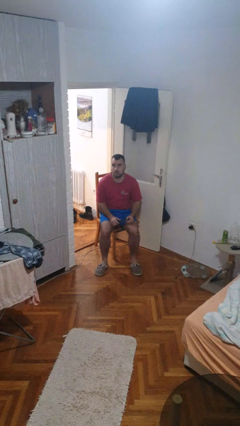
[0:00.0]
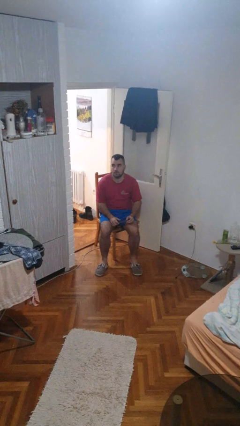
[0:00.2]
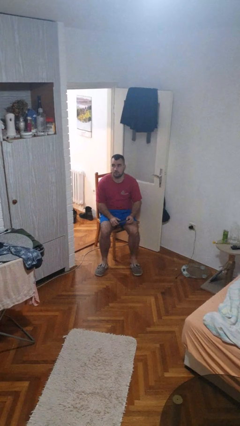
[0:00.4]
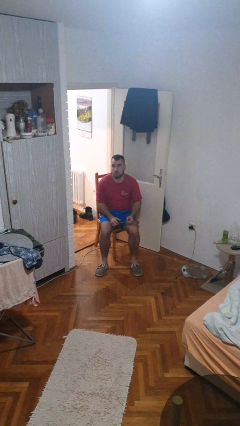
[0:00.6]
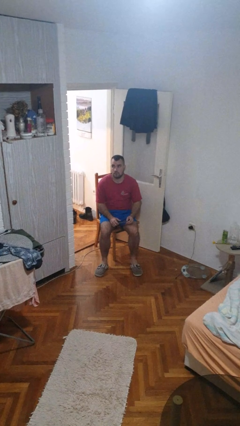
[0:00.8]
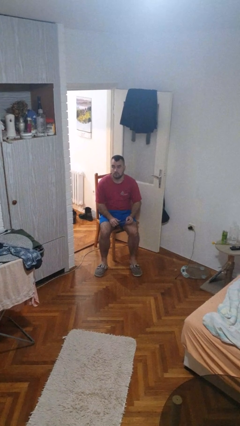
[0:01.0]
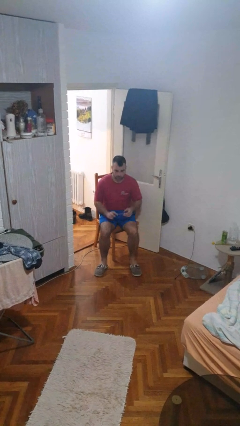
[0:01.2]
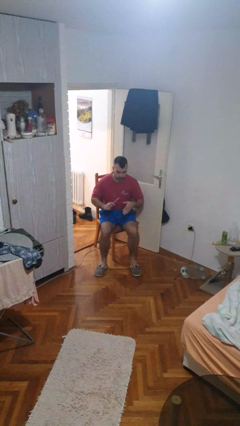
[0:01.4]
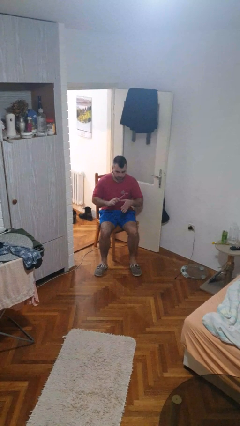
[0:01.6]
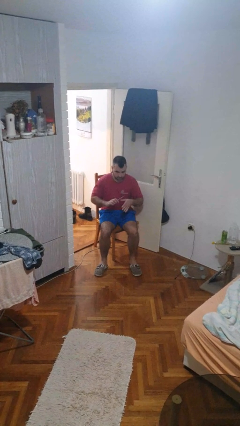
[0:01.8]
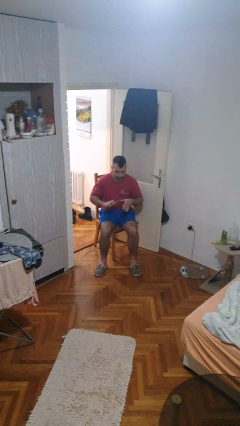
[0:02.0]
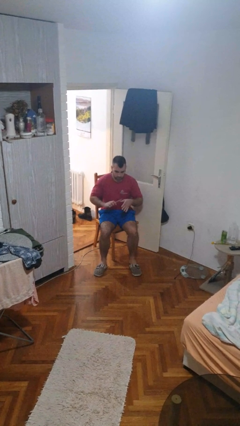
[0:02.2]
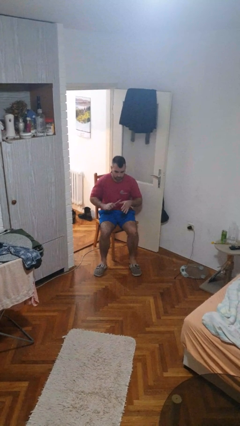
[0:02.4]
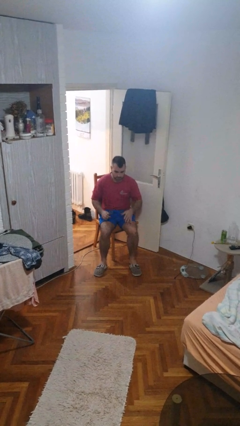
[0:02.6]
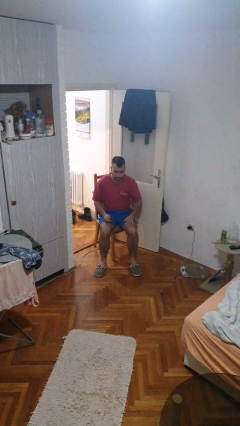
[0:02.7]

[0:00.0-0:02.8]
person files fingernails

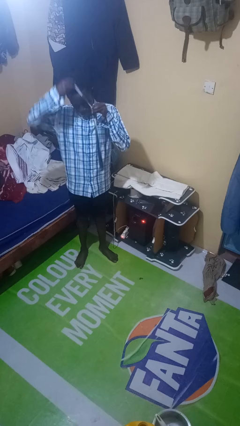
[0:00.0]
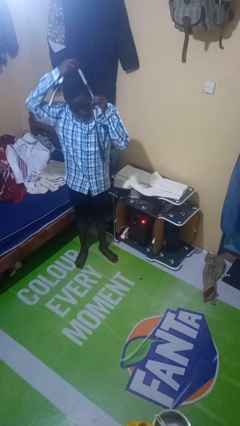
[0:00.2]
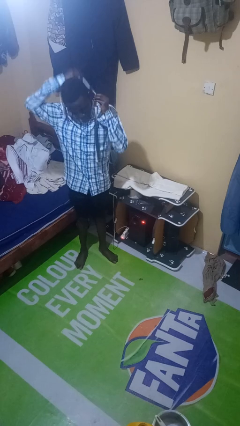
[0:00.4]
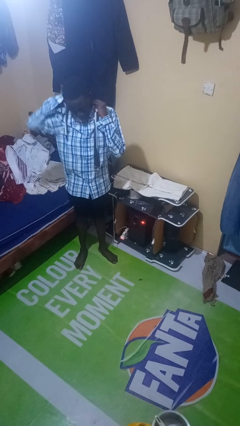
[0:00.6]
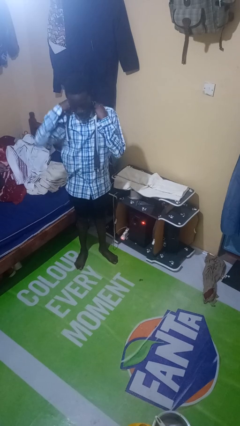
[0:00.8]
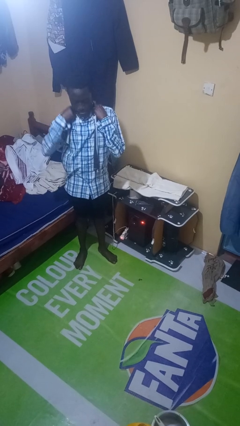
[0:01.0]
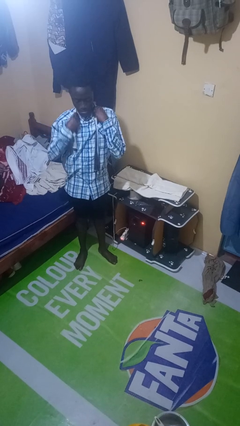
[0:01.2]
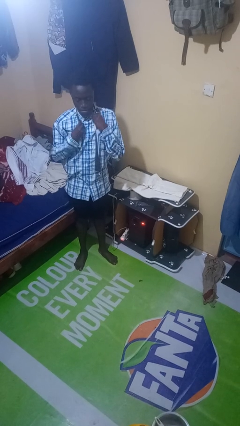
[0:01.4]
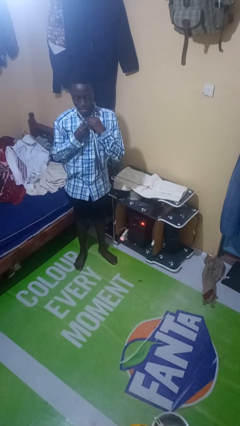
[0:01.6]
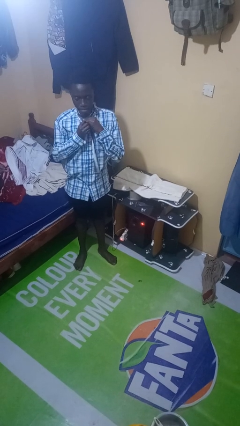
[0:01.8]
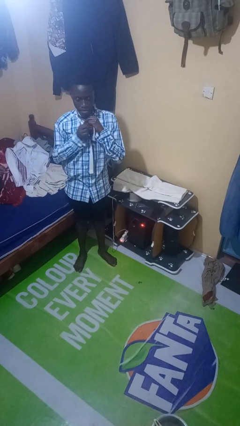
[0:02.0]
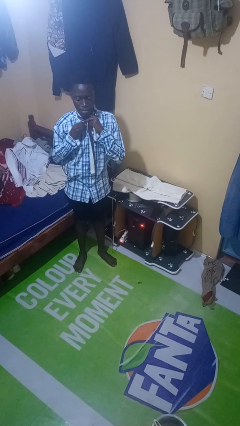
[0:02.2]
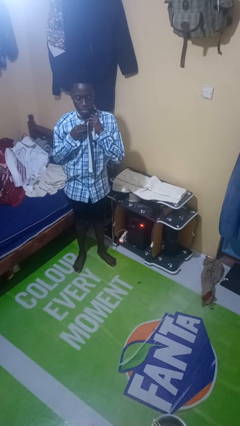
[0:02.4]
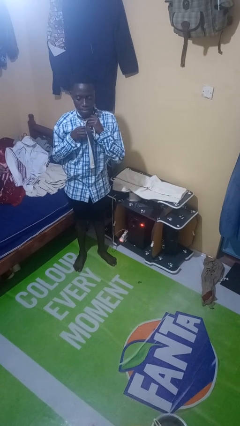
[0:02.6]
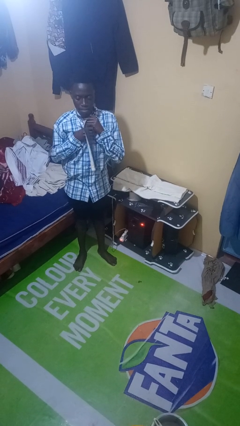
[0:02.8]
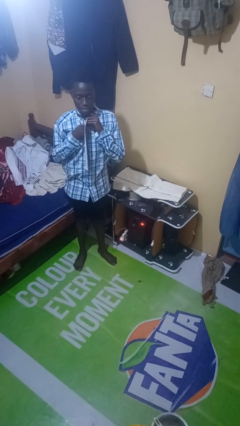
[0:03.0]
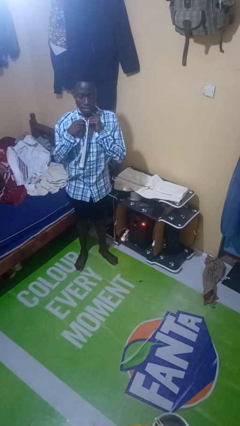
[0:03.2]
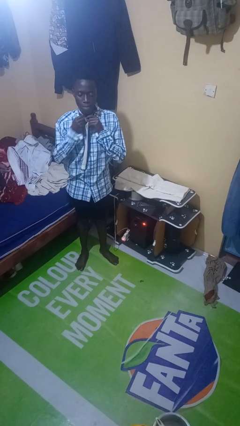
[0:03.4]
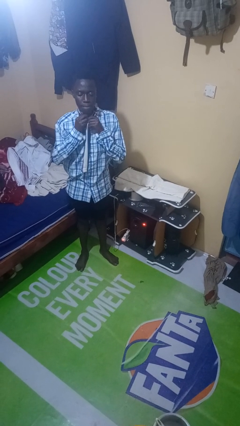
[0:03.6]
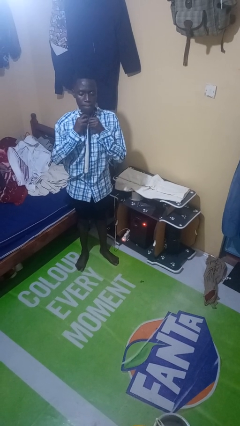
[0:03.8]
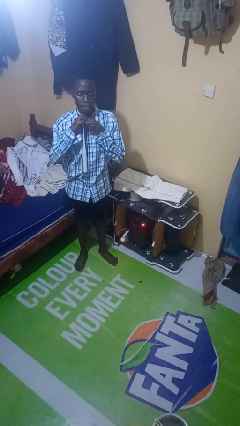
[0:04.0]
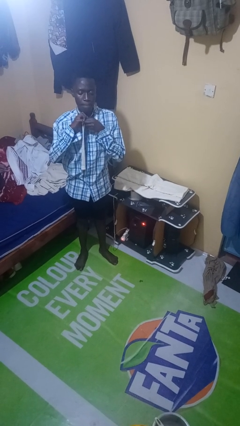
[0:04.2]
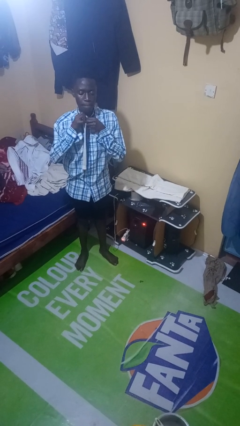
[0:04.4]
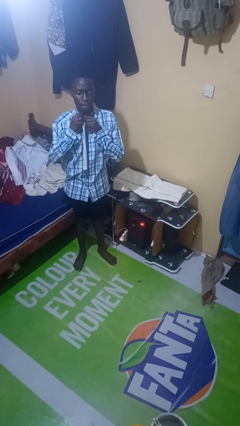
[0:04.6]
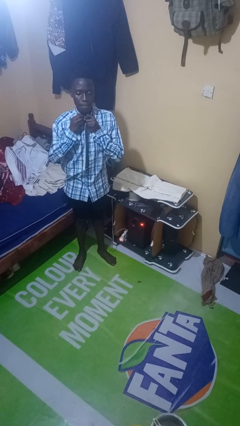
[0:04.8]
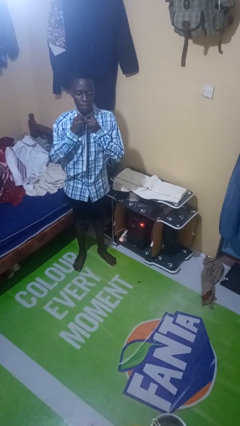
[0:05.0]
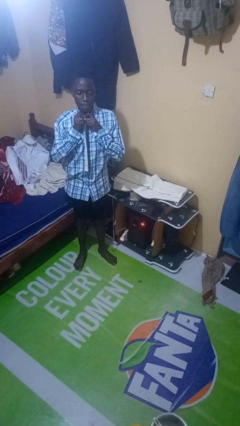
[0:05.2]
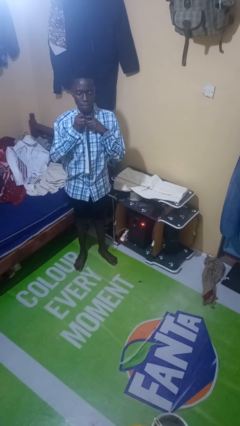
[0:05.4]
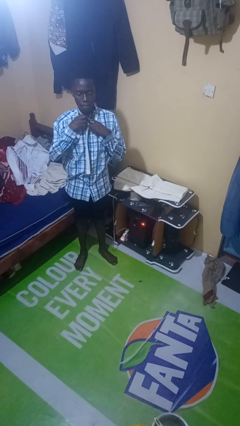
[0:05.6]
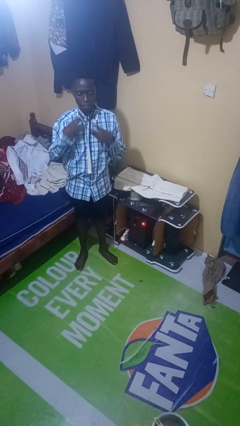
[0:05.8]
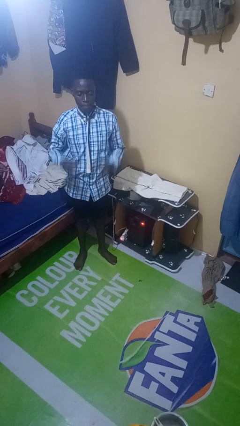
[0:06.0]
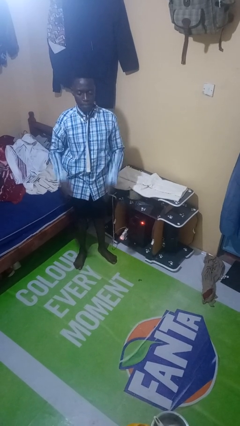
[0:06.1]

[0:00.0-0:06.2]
person puts on necktie

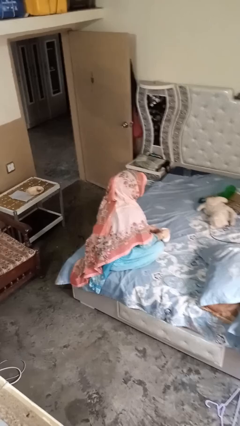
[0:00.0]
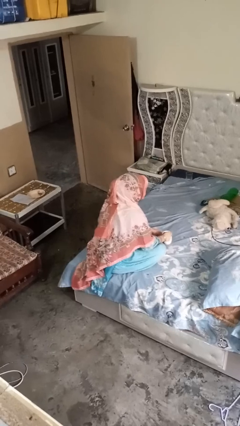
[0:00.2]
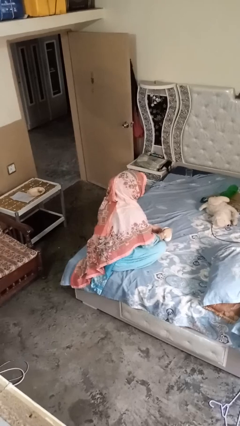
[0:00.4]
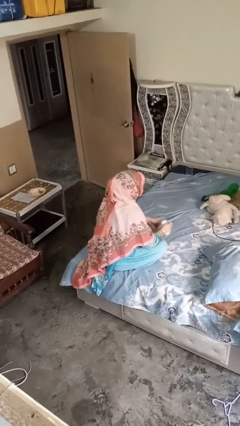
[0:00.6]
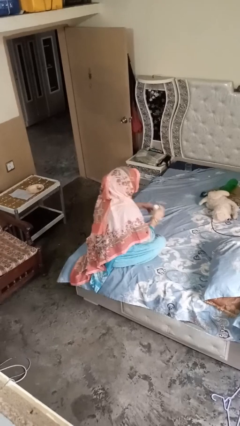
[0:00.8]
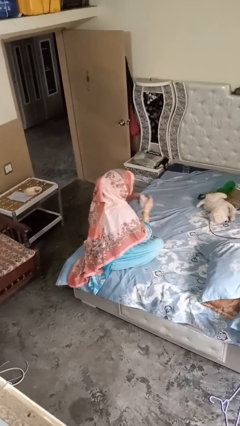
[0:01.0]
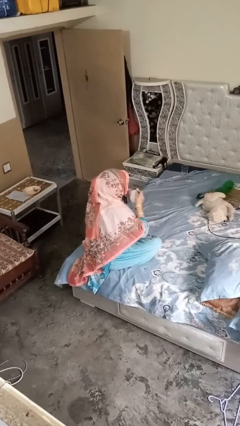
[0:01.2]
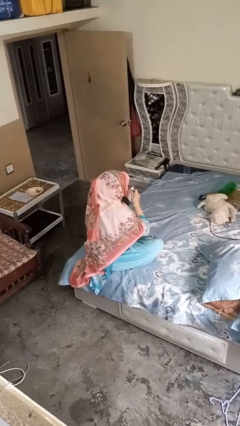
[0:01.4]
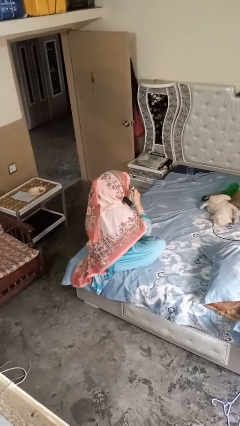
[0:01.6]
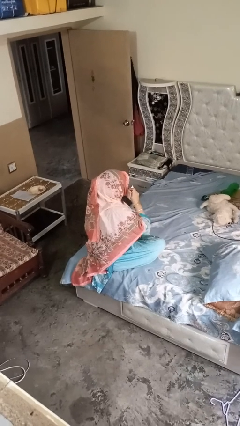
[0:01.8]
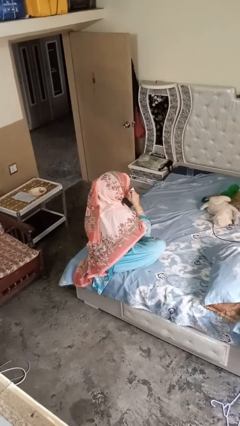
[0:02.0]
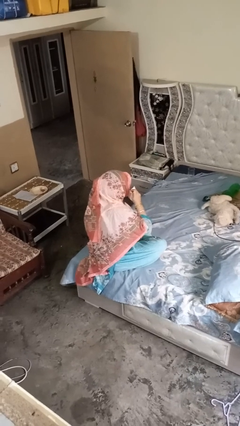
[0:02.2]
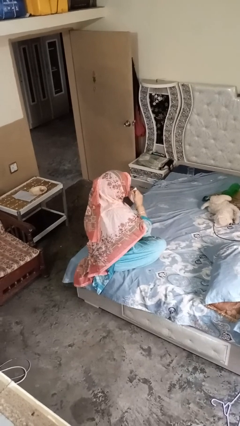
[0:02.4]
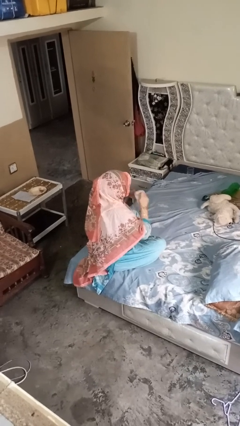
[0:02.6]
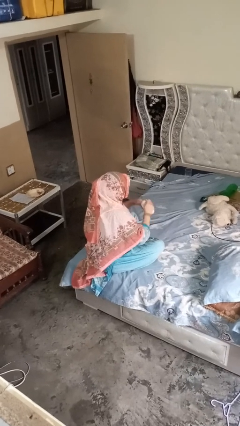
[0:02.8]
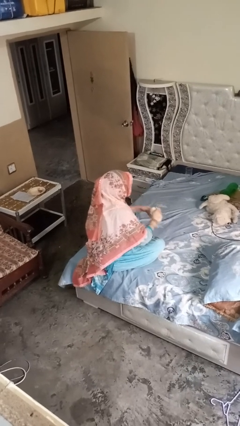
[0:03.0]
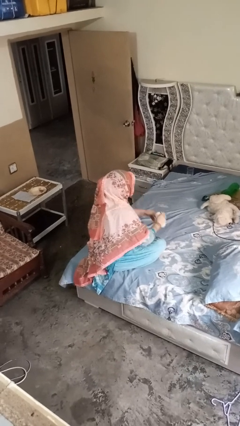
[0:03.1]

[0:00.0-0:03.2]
person drinks from mug

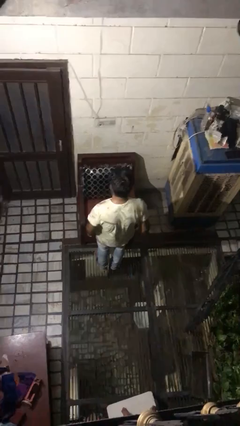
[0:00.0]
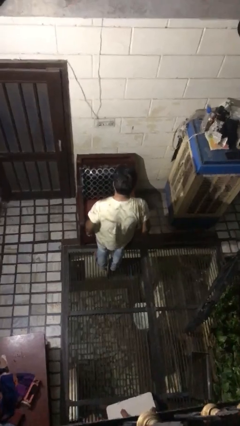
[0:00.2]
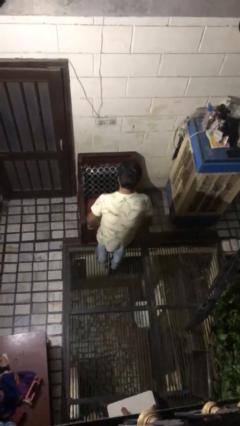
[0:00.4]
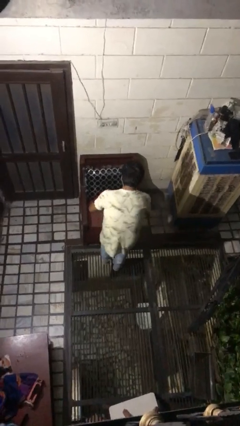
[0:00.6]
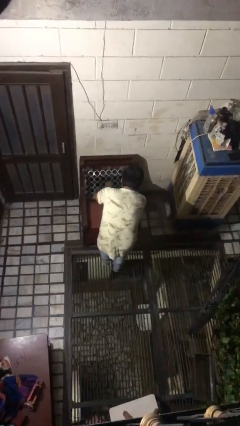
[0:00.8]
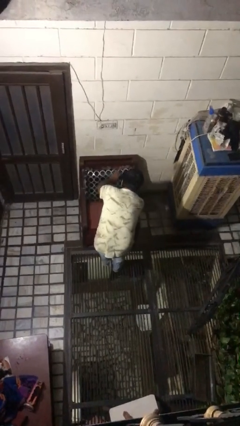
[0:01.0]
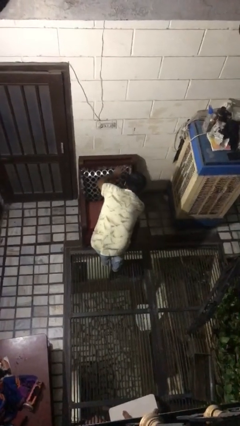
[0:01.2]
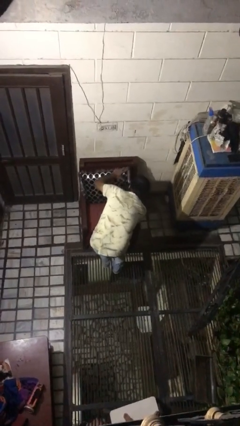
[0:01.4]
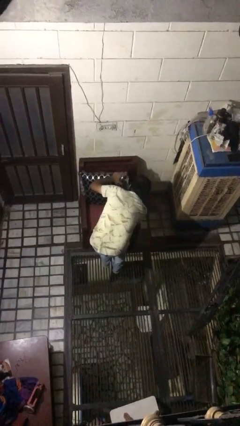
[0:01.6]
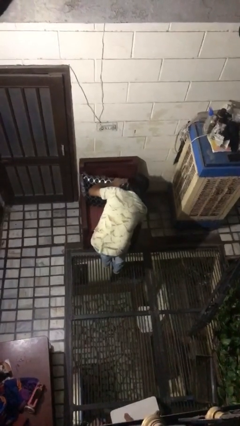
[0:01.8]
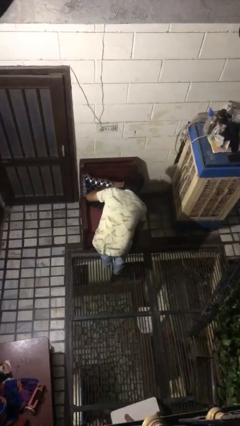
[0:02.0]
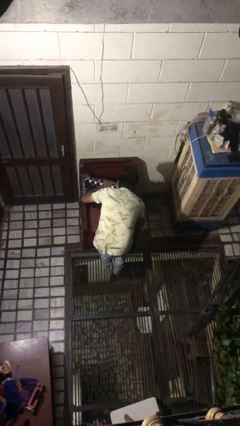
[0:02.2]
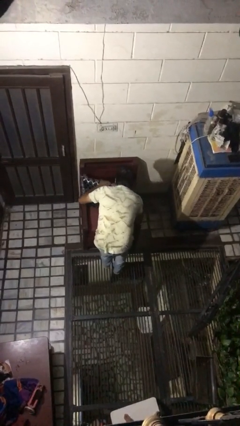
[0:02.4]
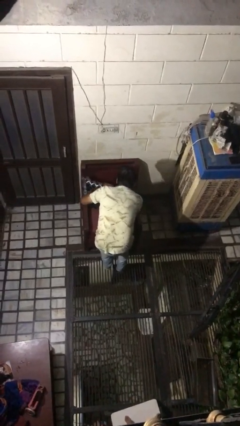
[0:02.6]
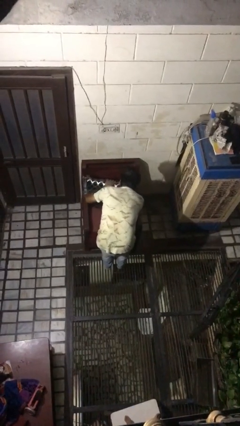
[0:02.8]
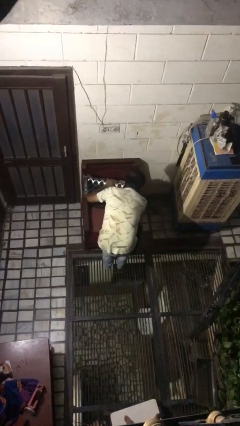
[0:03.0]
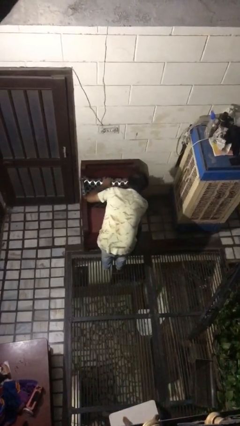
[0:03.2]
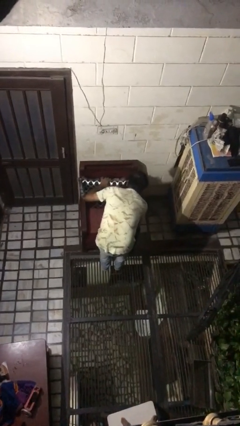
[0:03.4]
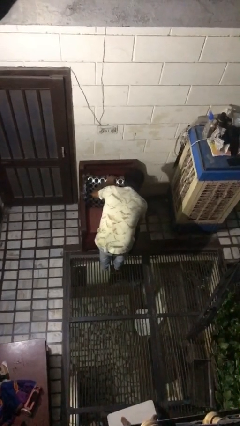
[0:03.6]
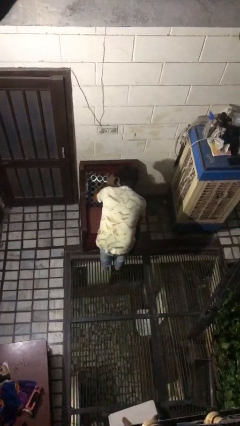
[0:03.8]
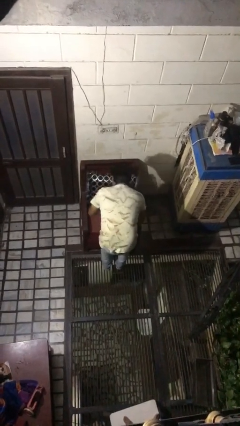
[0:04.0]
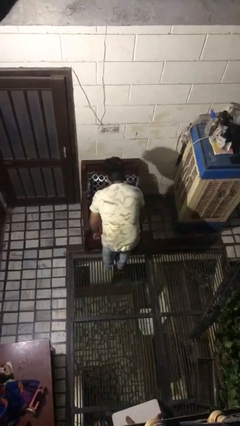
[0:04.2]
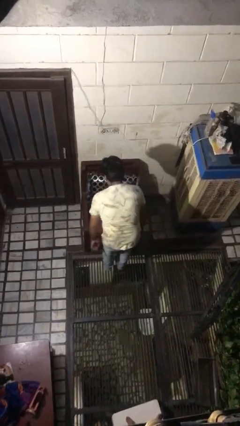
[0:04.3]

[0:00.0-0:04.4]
person searches in couch

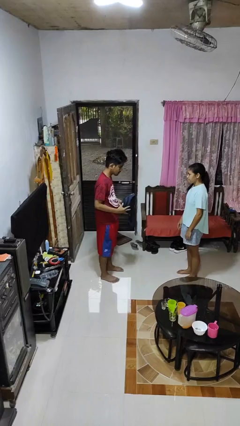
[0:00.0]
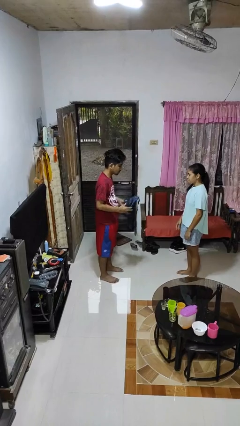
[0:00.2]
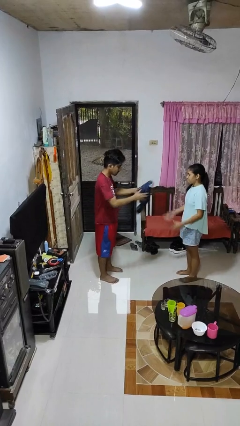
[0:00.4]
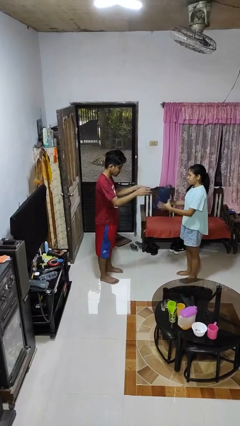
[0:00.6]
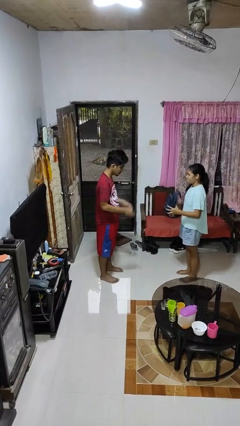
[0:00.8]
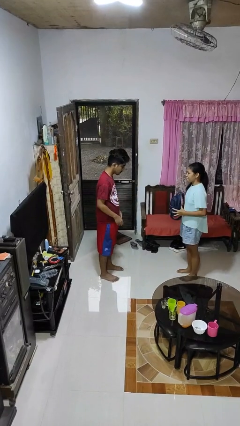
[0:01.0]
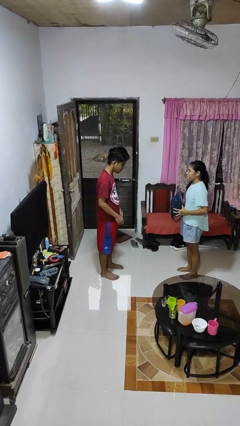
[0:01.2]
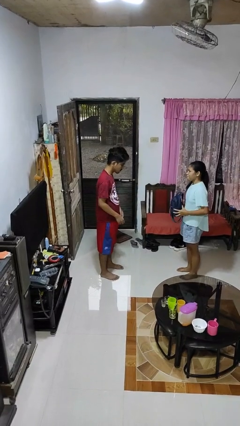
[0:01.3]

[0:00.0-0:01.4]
person throws object to person
